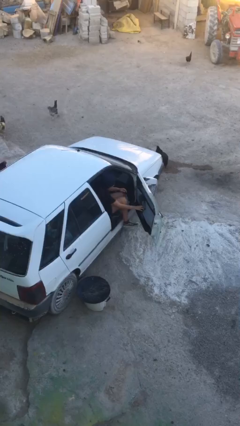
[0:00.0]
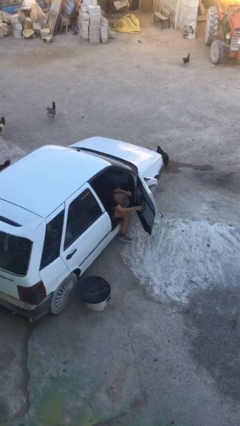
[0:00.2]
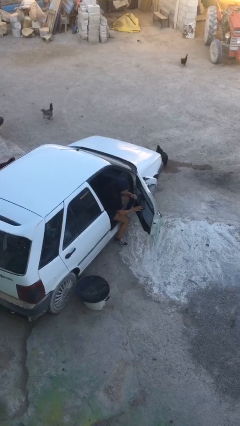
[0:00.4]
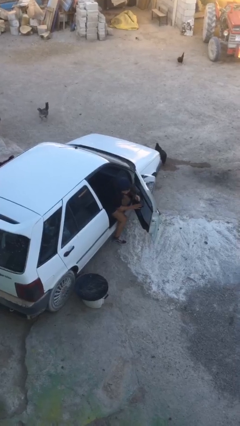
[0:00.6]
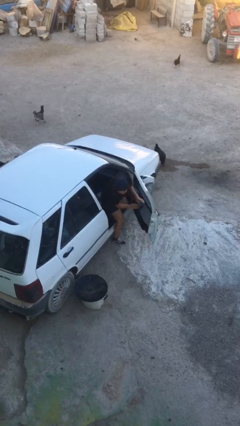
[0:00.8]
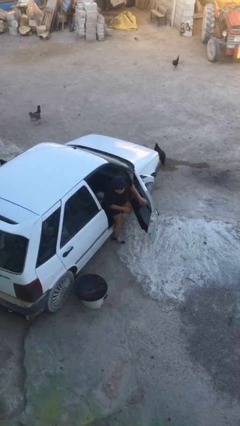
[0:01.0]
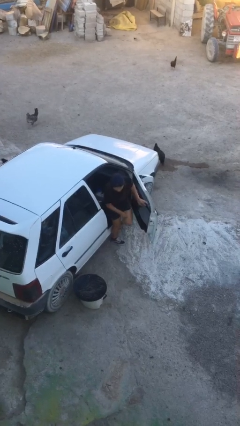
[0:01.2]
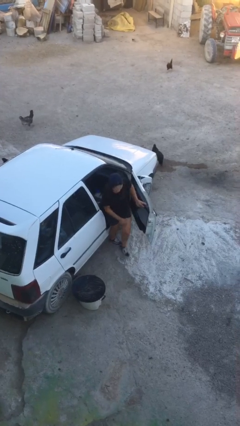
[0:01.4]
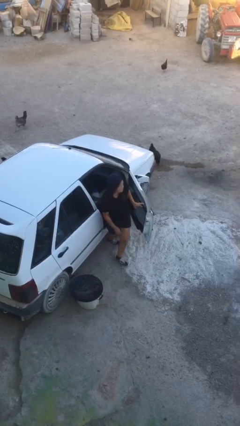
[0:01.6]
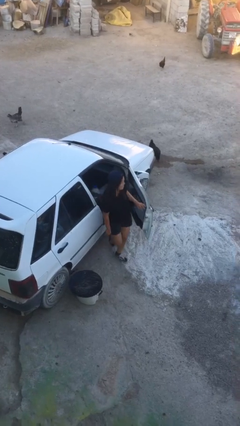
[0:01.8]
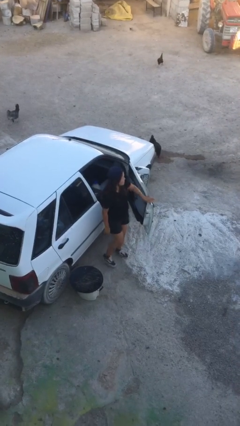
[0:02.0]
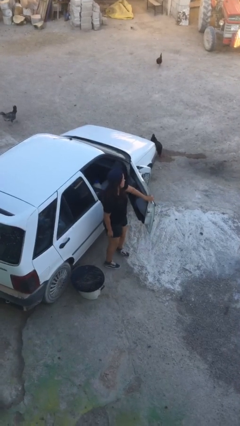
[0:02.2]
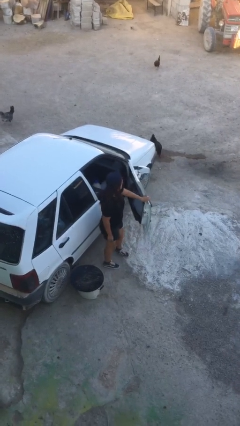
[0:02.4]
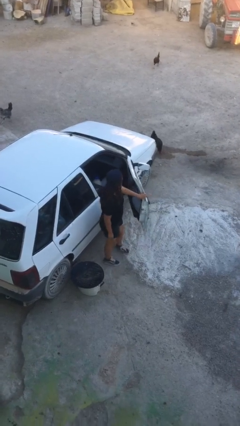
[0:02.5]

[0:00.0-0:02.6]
person exits car

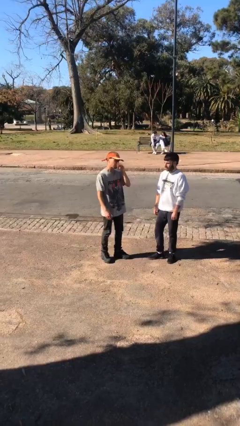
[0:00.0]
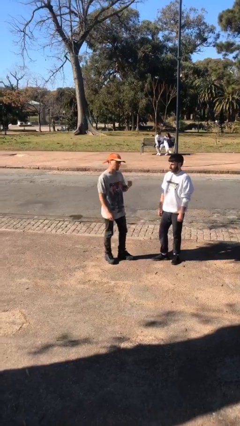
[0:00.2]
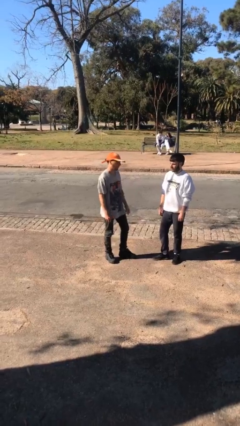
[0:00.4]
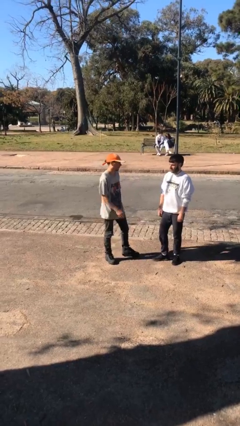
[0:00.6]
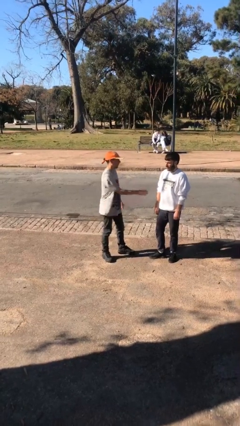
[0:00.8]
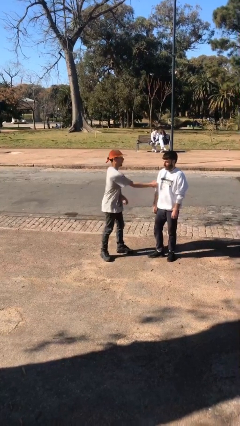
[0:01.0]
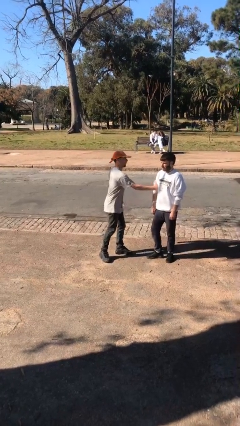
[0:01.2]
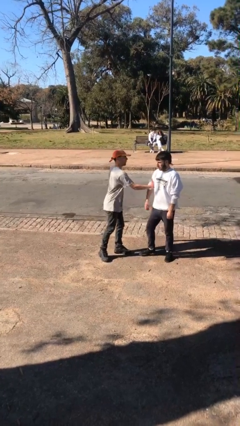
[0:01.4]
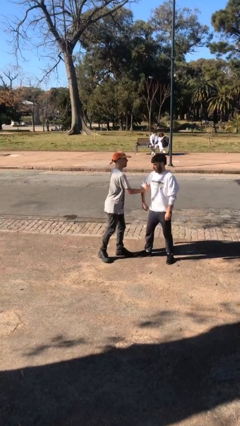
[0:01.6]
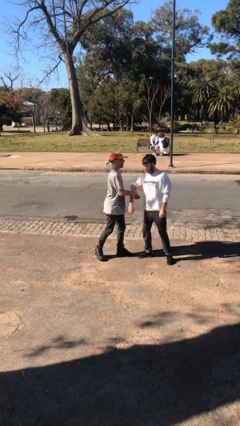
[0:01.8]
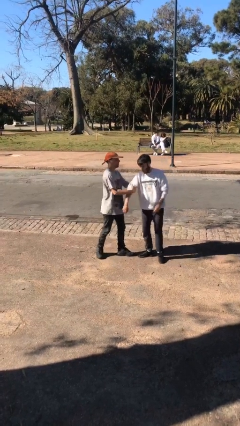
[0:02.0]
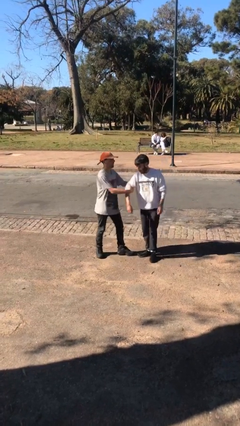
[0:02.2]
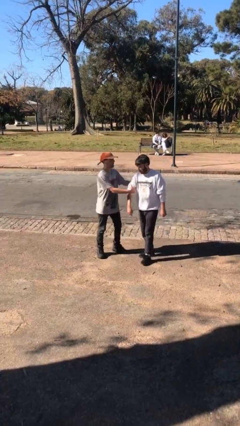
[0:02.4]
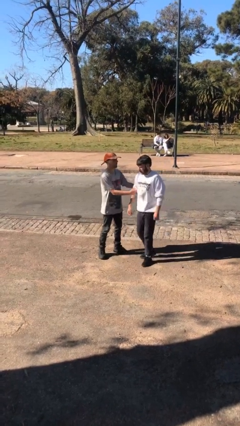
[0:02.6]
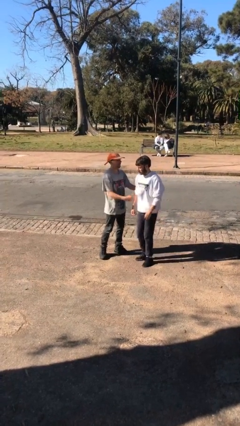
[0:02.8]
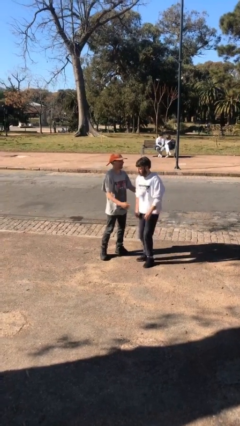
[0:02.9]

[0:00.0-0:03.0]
person grabs person by bicep

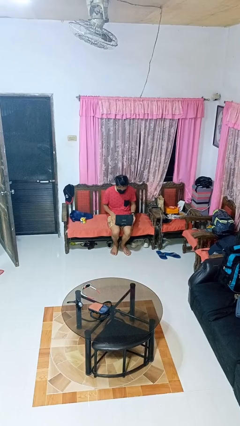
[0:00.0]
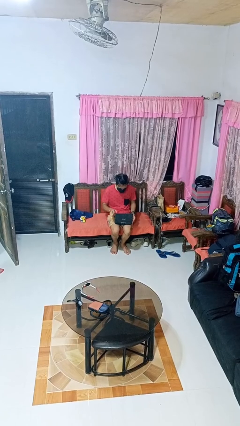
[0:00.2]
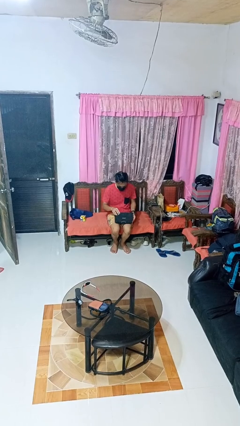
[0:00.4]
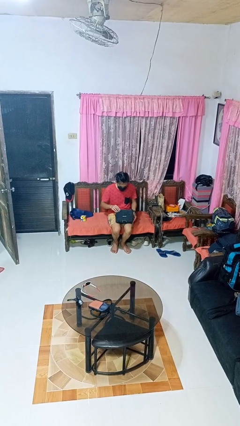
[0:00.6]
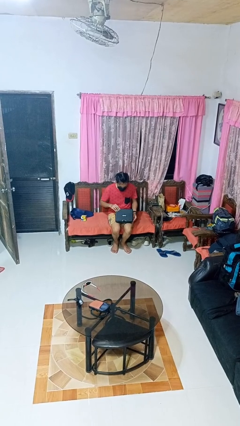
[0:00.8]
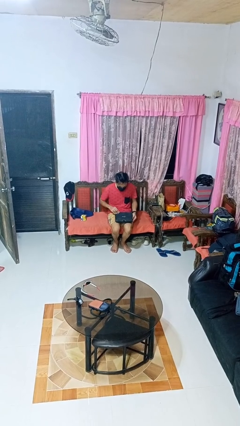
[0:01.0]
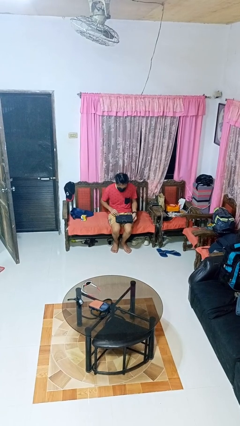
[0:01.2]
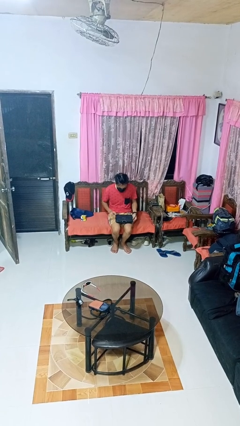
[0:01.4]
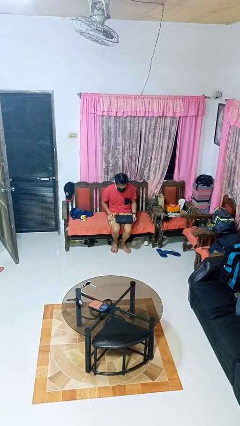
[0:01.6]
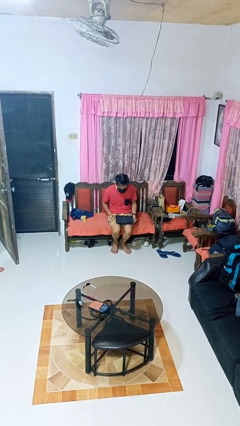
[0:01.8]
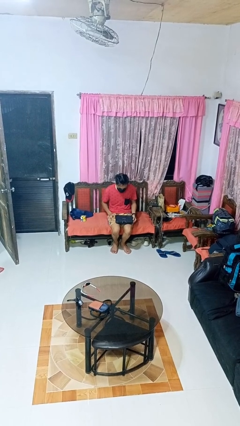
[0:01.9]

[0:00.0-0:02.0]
person closes laptop

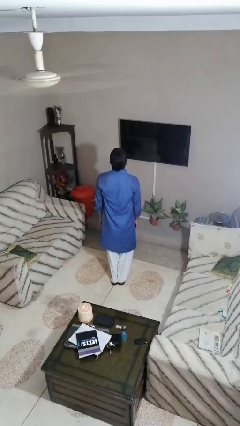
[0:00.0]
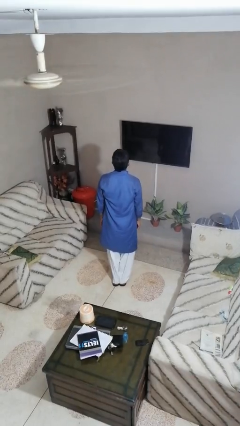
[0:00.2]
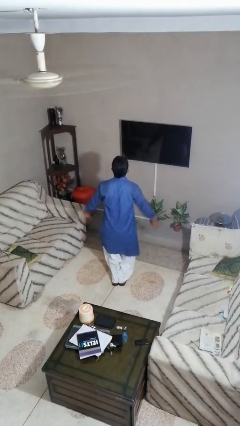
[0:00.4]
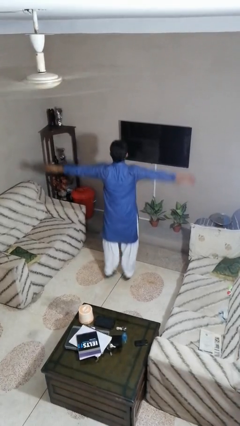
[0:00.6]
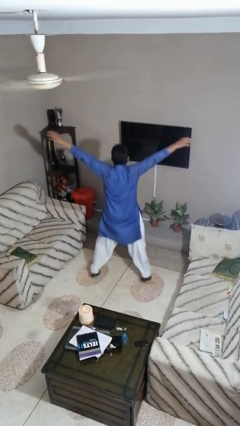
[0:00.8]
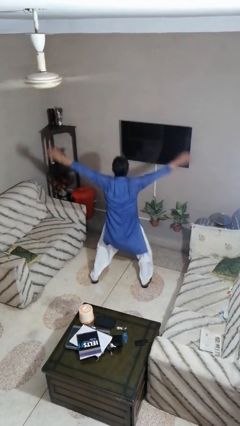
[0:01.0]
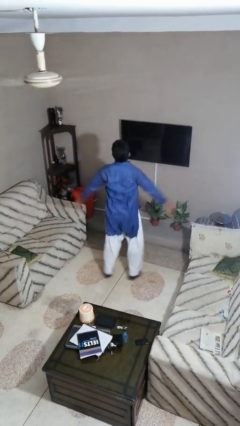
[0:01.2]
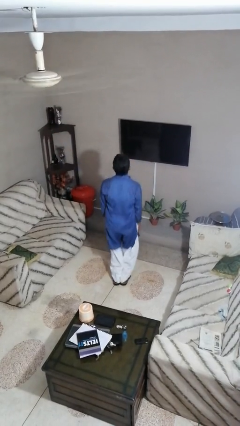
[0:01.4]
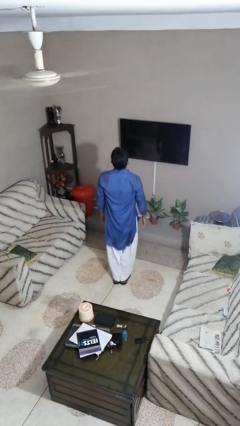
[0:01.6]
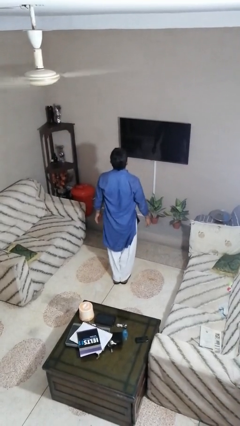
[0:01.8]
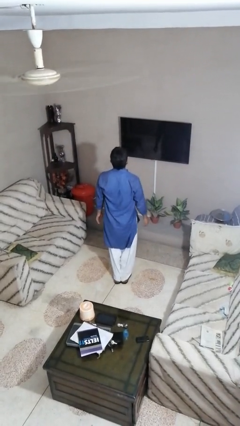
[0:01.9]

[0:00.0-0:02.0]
person exercises with jumping jacks

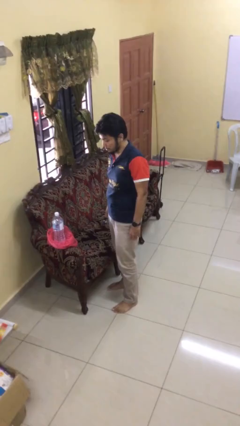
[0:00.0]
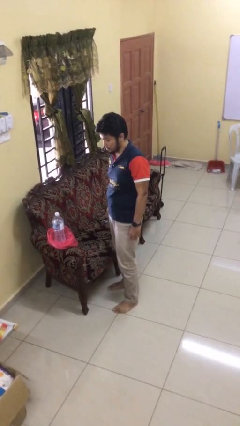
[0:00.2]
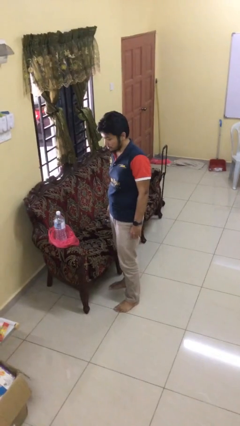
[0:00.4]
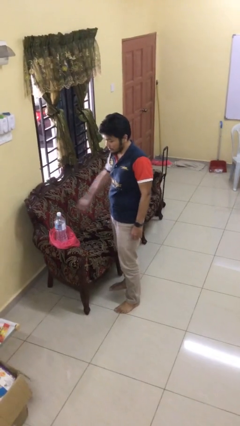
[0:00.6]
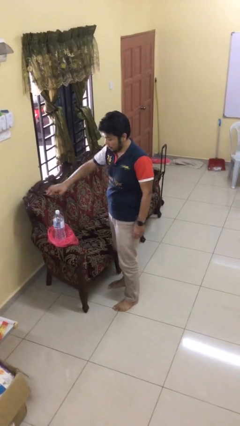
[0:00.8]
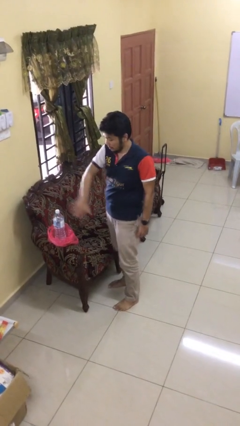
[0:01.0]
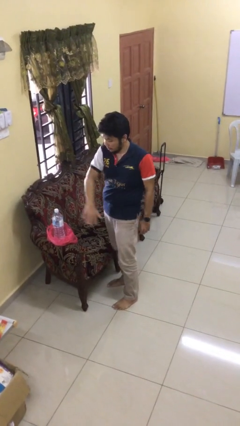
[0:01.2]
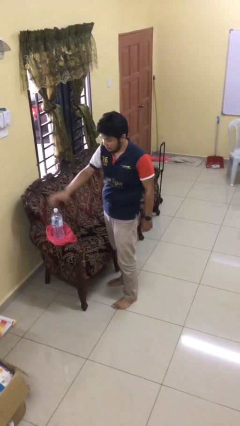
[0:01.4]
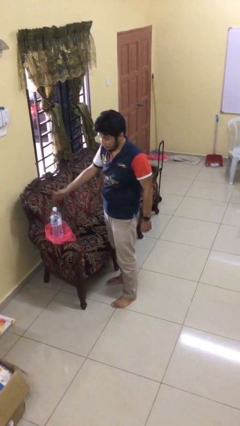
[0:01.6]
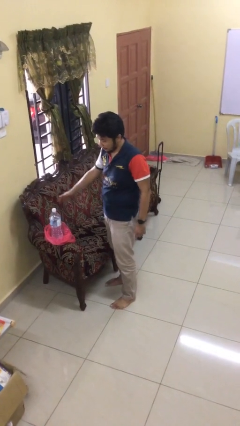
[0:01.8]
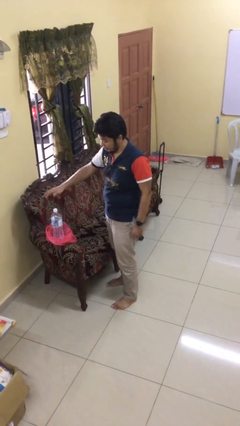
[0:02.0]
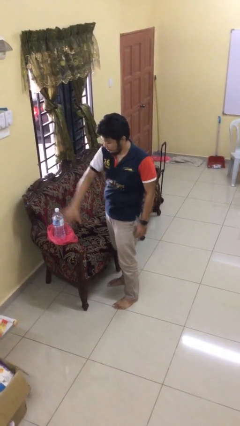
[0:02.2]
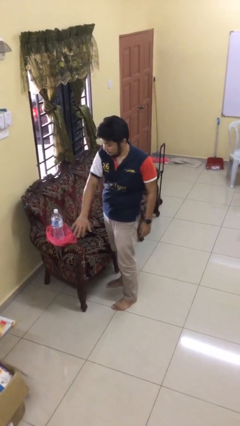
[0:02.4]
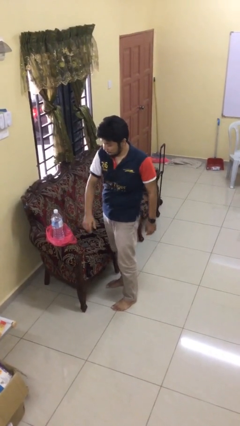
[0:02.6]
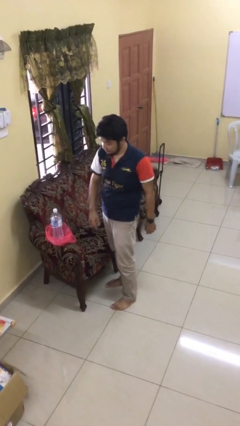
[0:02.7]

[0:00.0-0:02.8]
person waves hand over object

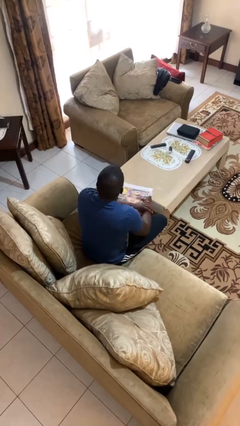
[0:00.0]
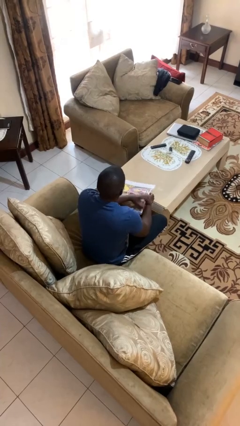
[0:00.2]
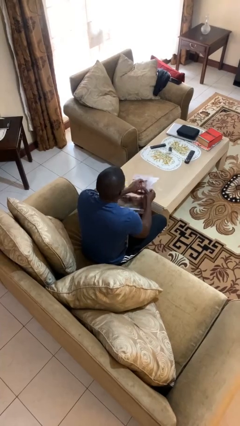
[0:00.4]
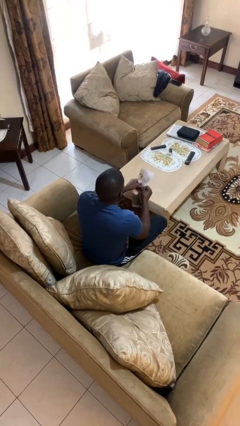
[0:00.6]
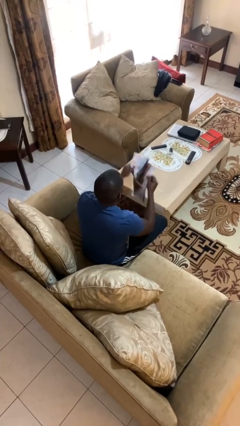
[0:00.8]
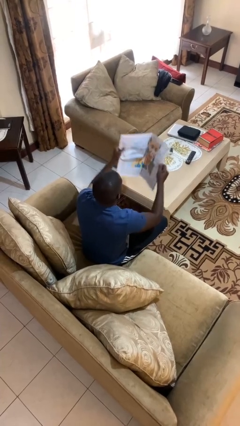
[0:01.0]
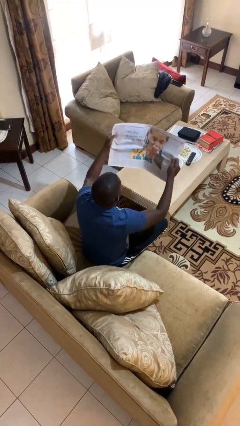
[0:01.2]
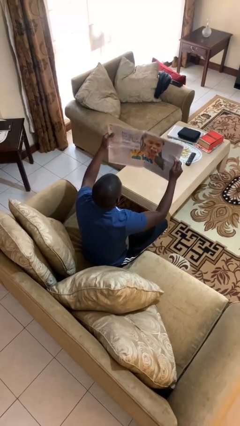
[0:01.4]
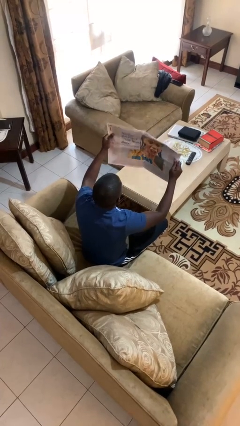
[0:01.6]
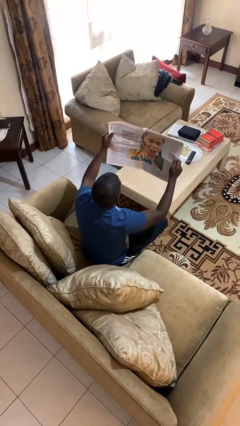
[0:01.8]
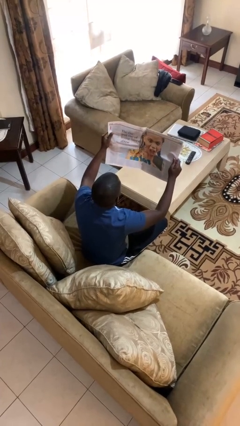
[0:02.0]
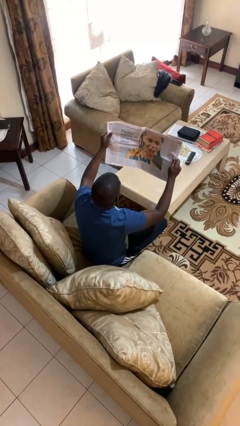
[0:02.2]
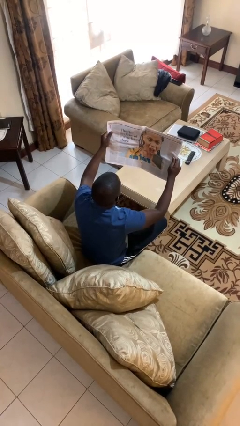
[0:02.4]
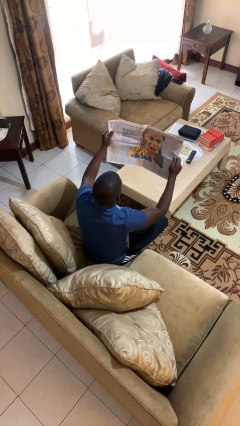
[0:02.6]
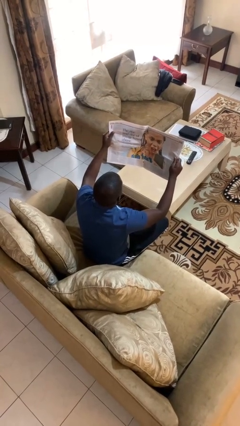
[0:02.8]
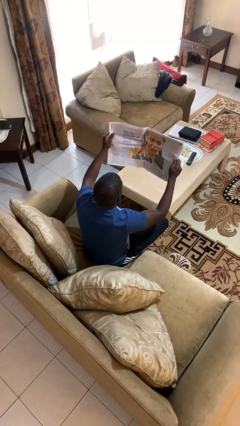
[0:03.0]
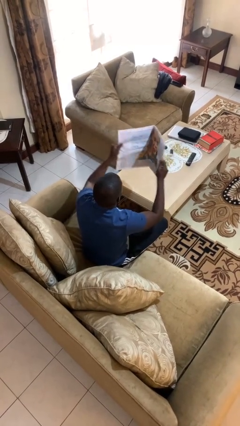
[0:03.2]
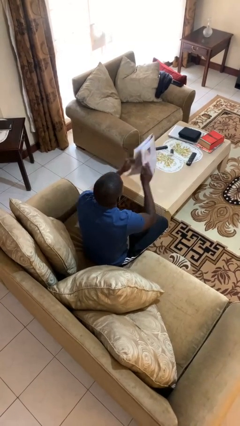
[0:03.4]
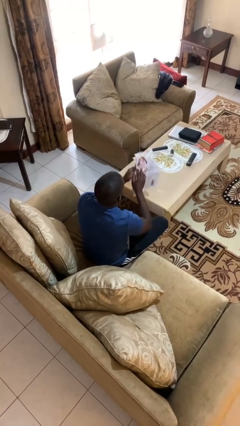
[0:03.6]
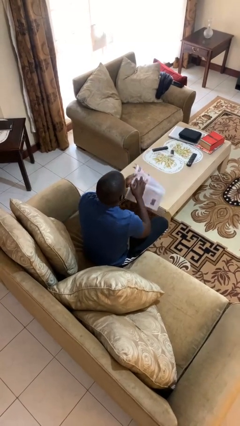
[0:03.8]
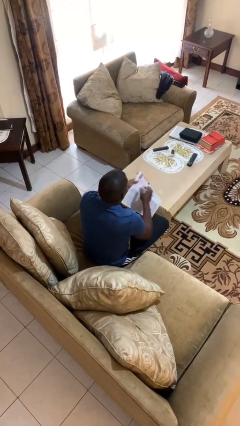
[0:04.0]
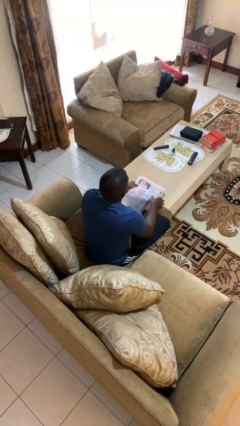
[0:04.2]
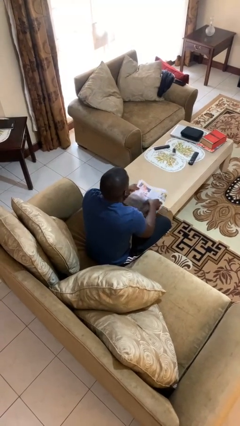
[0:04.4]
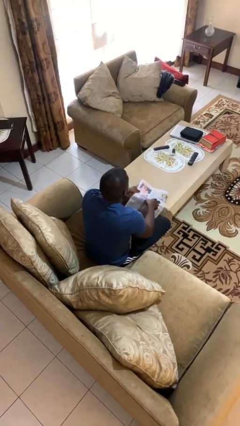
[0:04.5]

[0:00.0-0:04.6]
person reads newspaper

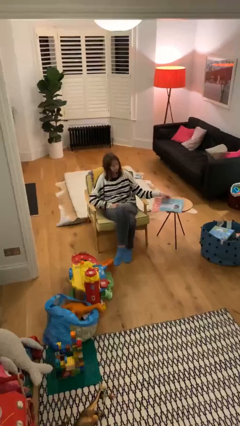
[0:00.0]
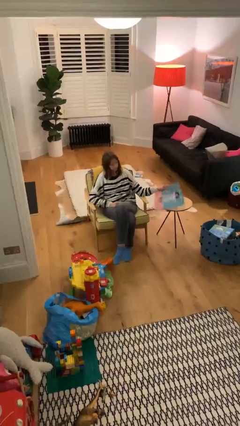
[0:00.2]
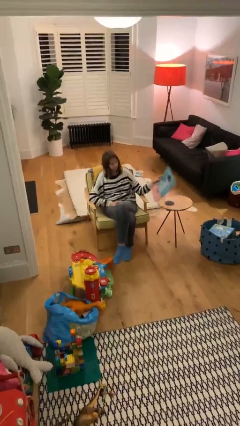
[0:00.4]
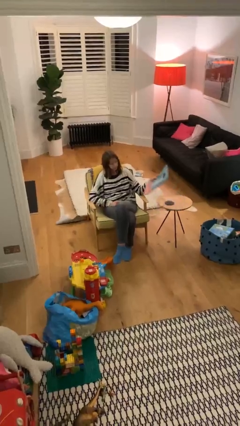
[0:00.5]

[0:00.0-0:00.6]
person picks up object from table
